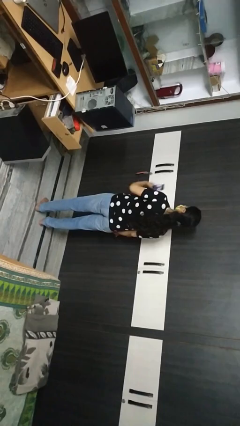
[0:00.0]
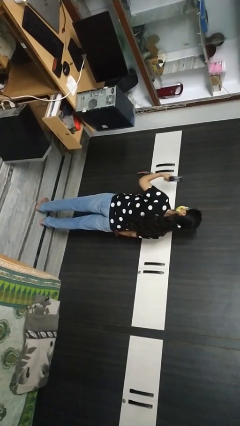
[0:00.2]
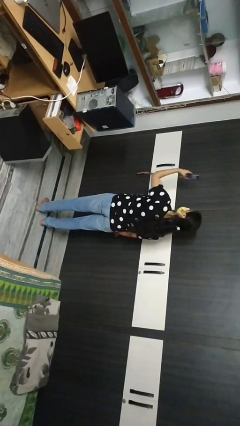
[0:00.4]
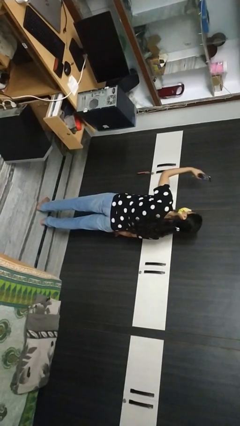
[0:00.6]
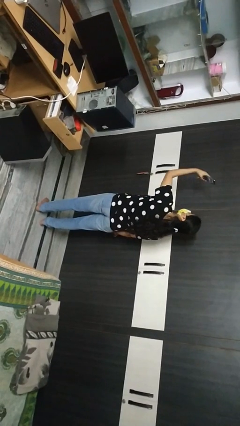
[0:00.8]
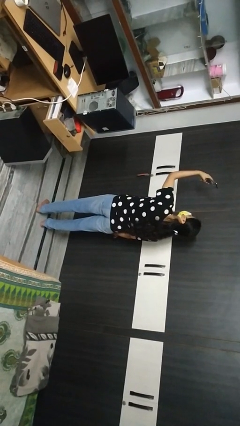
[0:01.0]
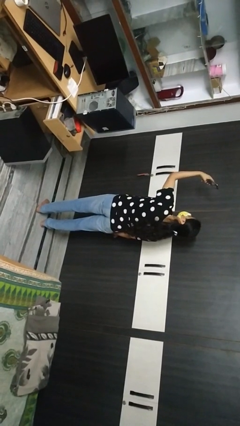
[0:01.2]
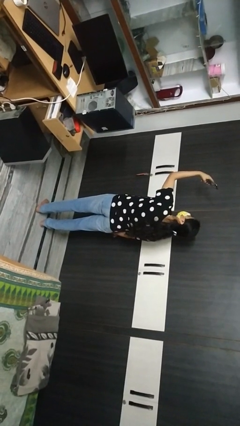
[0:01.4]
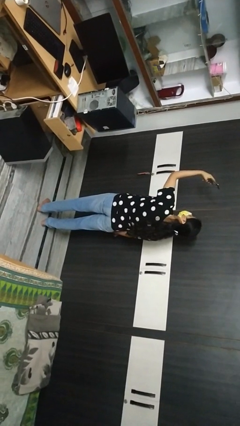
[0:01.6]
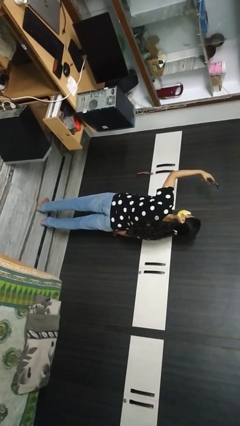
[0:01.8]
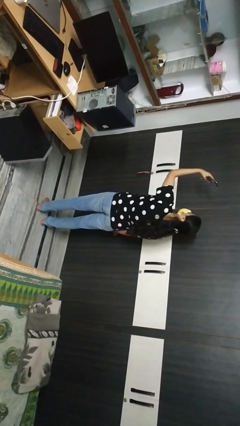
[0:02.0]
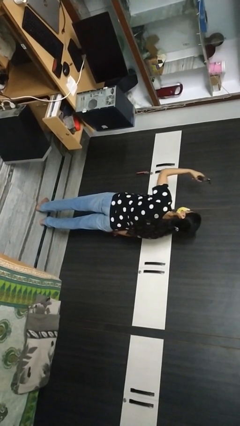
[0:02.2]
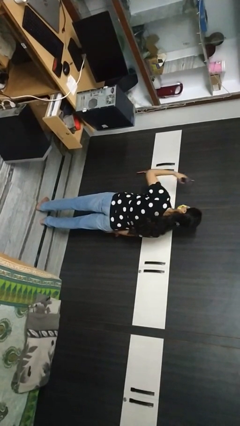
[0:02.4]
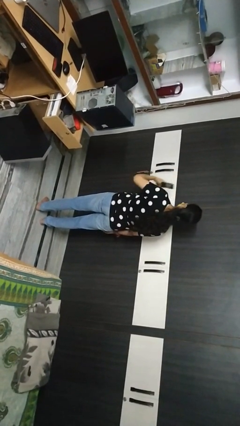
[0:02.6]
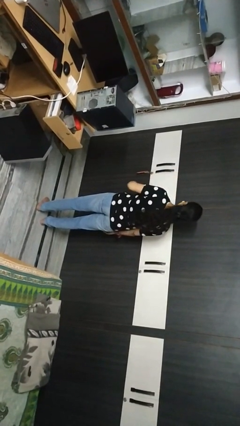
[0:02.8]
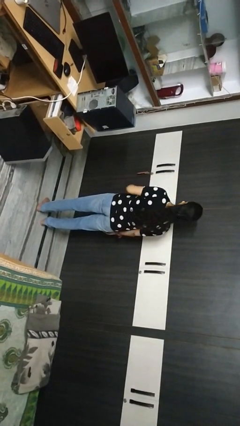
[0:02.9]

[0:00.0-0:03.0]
person takes selfie

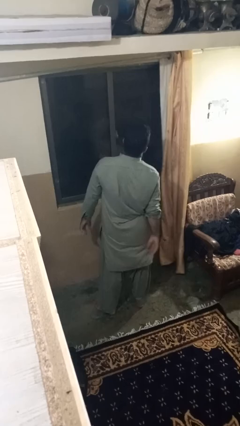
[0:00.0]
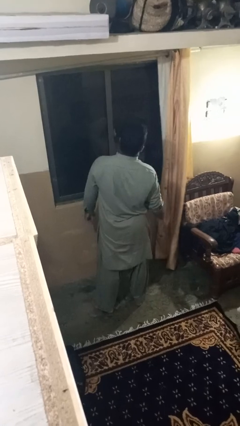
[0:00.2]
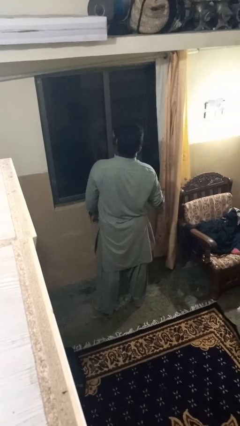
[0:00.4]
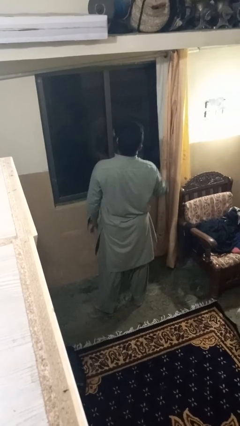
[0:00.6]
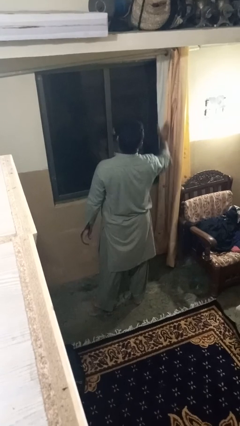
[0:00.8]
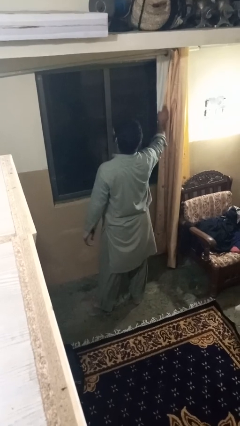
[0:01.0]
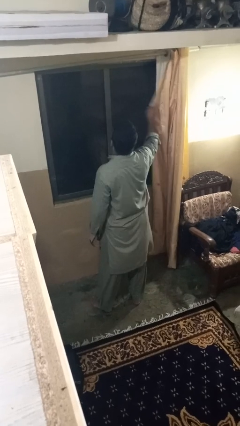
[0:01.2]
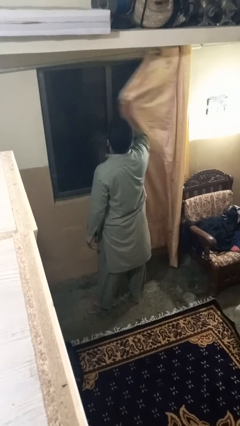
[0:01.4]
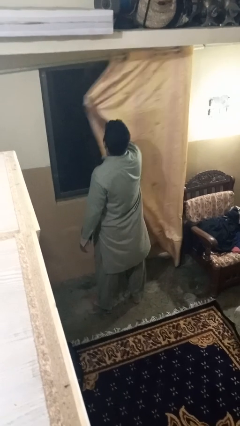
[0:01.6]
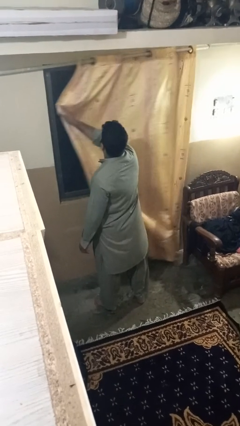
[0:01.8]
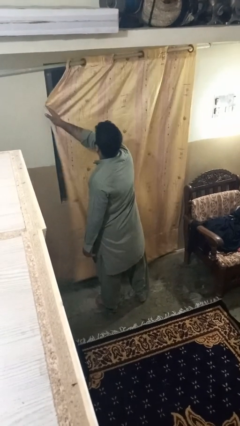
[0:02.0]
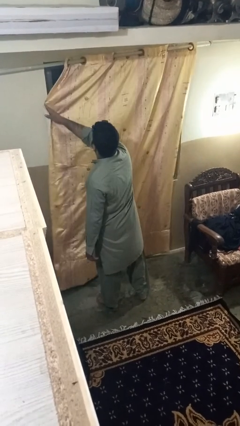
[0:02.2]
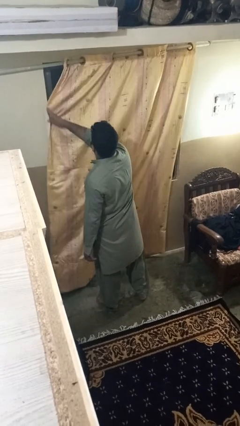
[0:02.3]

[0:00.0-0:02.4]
person closes curtains

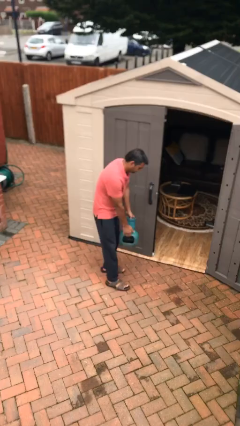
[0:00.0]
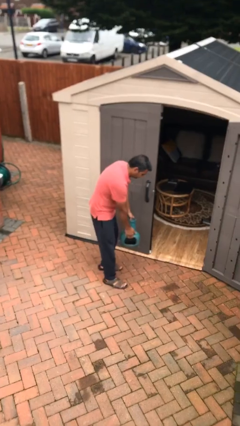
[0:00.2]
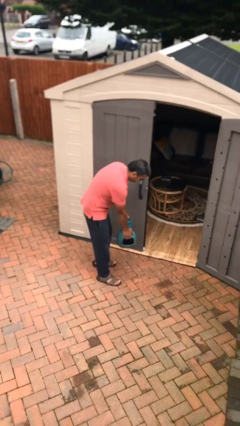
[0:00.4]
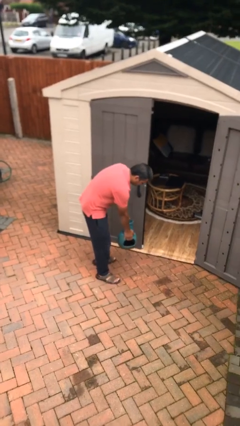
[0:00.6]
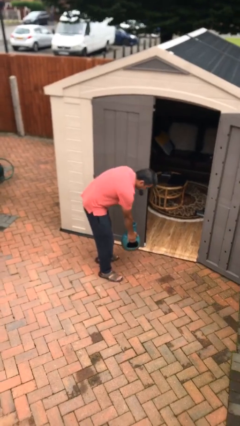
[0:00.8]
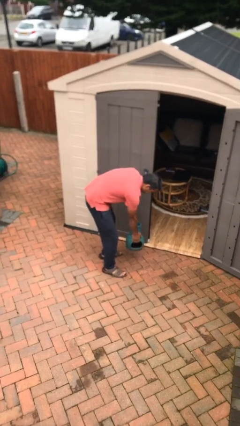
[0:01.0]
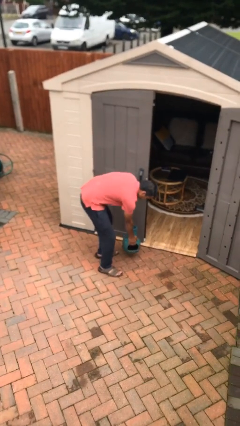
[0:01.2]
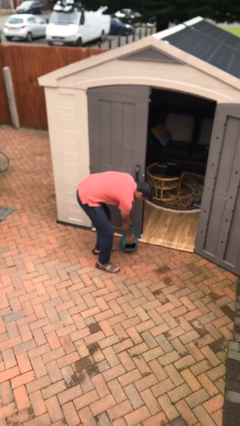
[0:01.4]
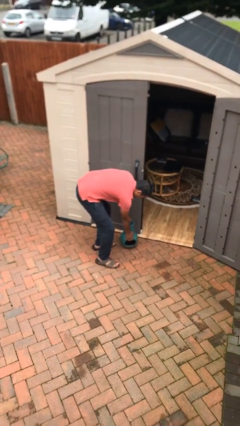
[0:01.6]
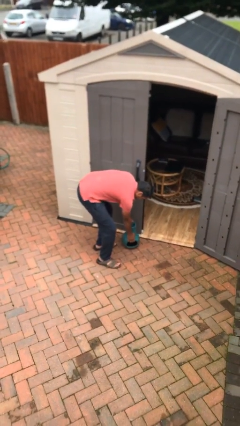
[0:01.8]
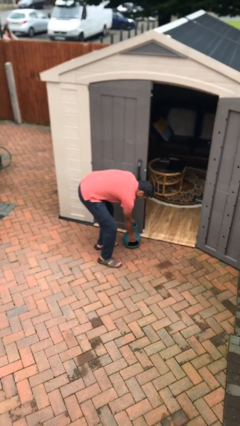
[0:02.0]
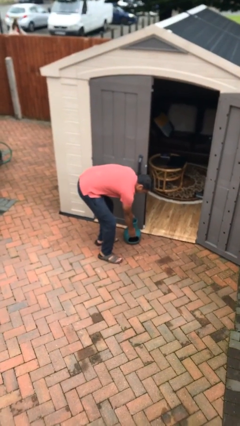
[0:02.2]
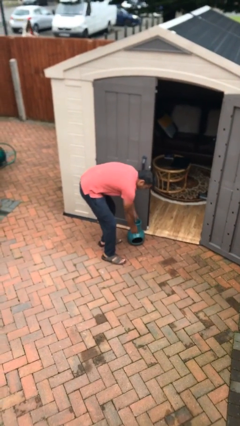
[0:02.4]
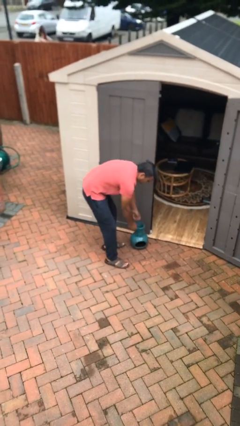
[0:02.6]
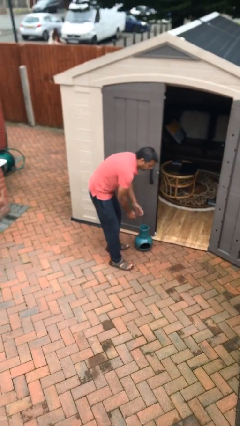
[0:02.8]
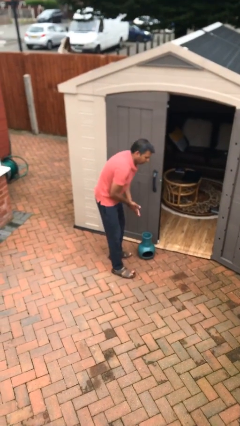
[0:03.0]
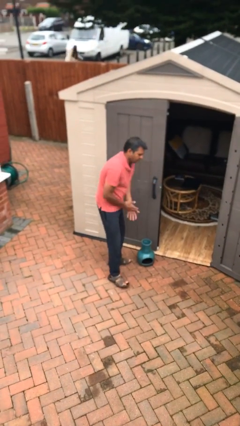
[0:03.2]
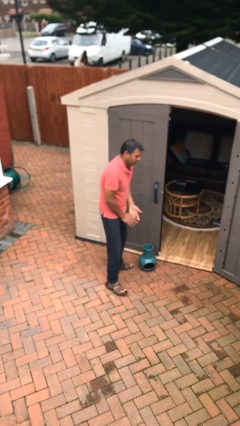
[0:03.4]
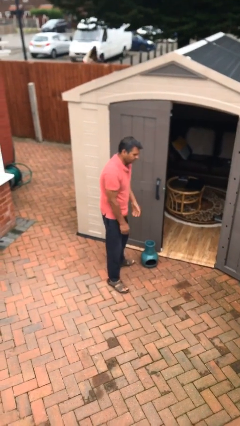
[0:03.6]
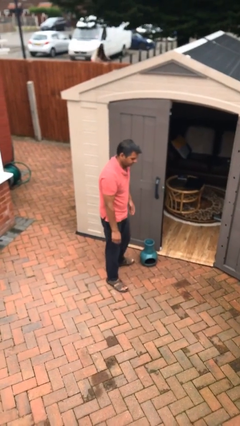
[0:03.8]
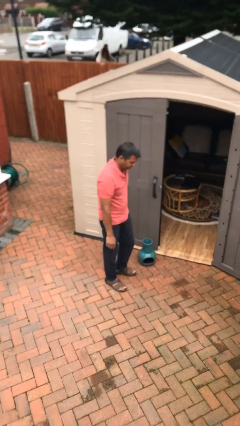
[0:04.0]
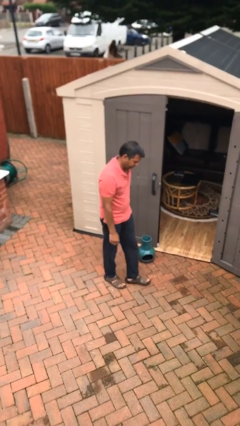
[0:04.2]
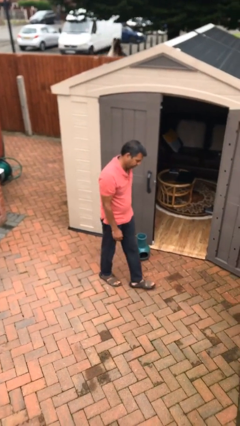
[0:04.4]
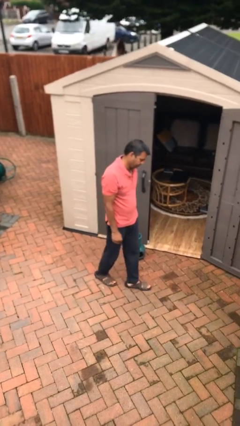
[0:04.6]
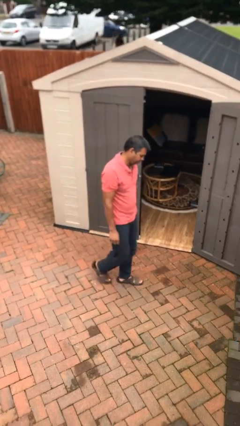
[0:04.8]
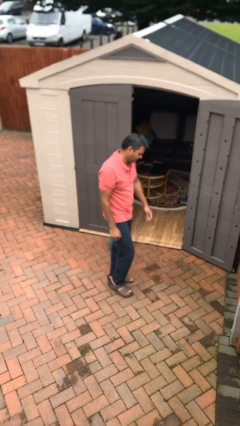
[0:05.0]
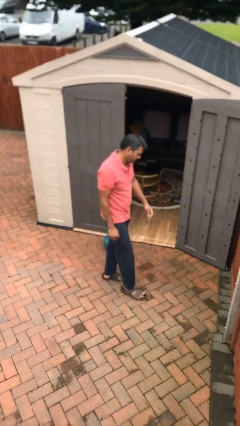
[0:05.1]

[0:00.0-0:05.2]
person puts down object on floor

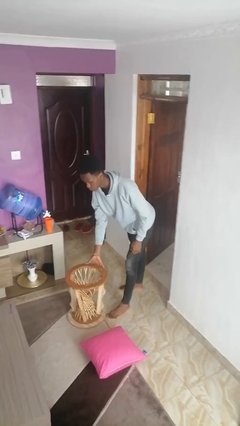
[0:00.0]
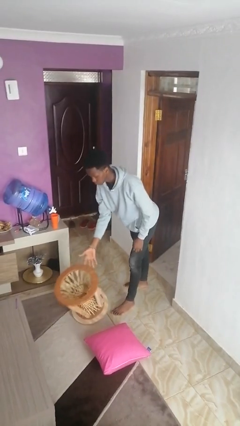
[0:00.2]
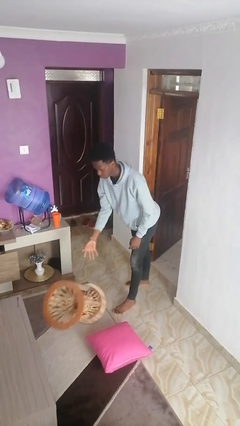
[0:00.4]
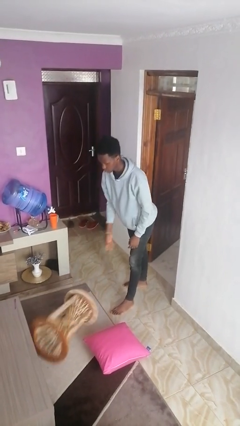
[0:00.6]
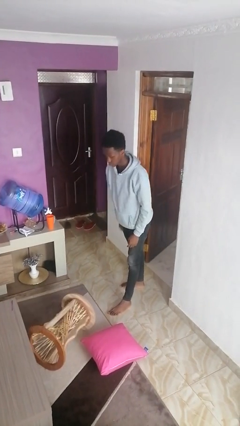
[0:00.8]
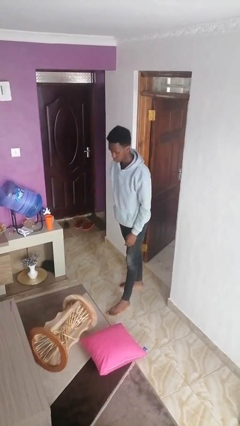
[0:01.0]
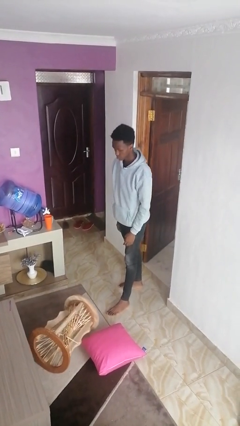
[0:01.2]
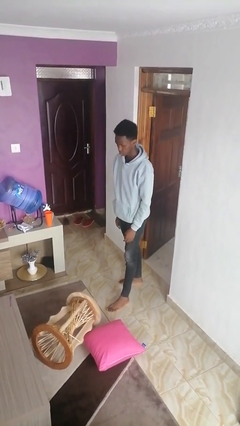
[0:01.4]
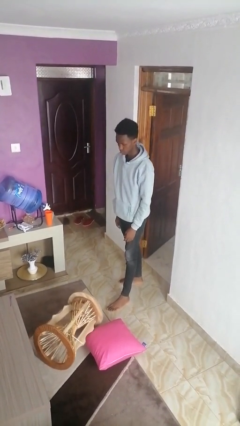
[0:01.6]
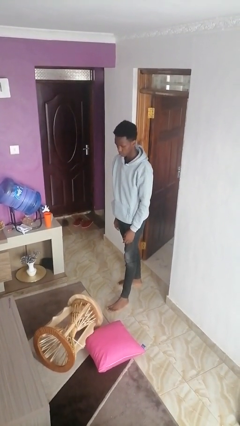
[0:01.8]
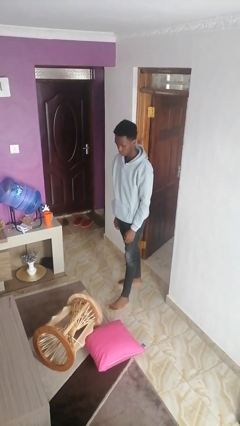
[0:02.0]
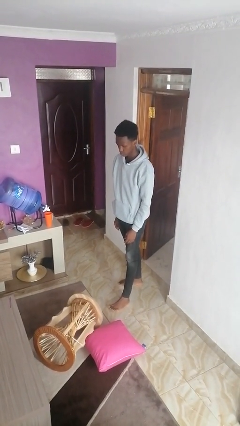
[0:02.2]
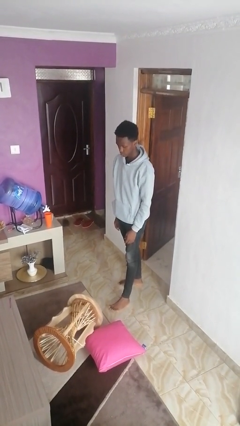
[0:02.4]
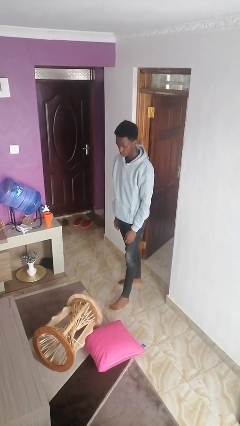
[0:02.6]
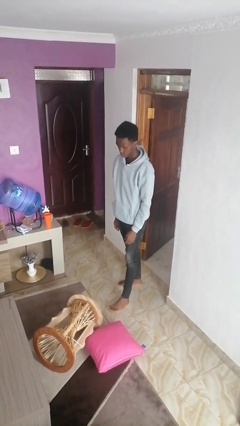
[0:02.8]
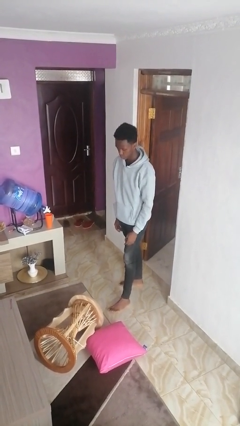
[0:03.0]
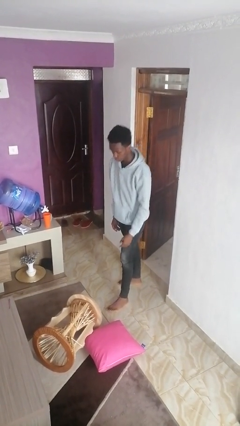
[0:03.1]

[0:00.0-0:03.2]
person knocks over furniture

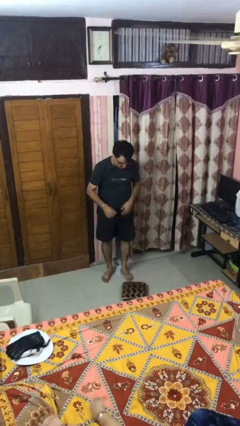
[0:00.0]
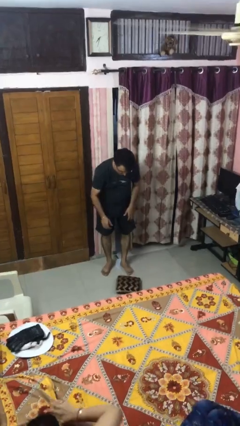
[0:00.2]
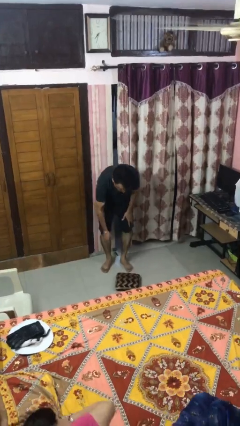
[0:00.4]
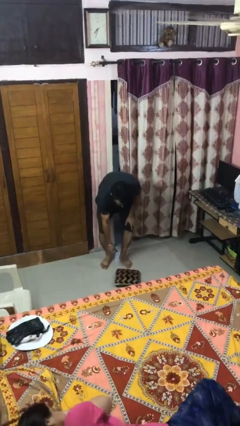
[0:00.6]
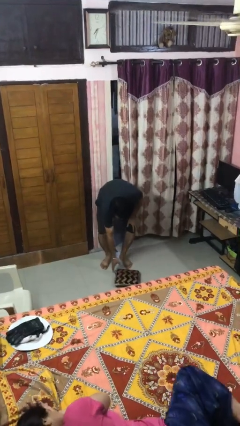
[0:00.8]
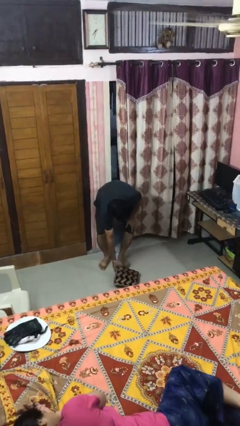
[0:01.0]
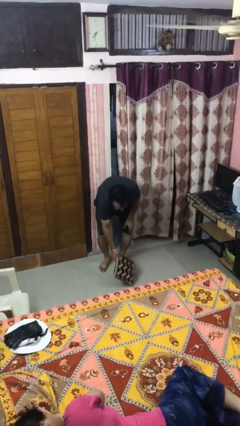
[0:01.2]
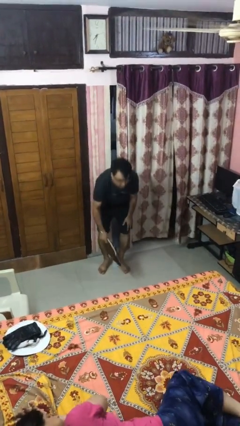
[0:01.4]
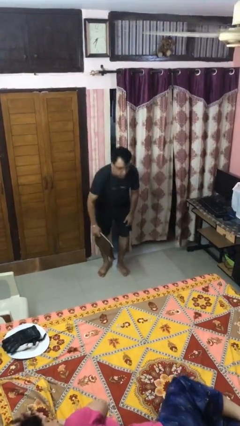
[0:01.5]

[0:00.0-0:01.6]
person picks up object from floor

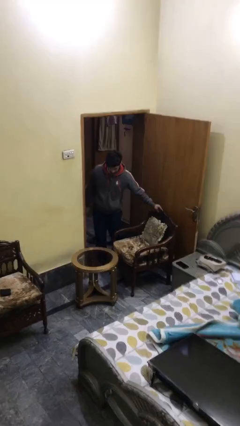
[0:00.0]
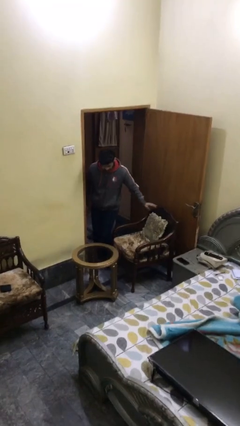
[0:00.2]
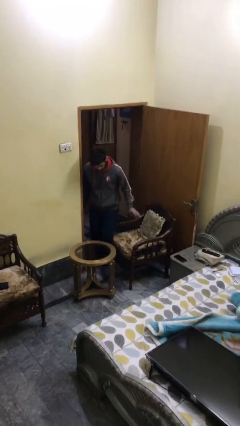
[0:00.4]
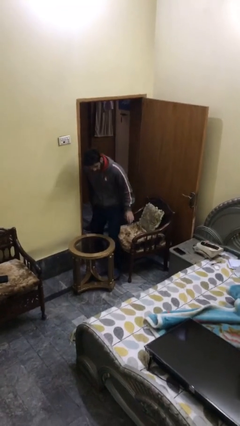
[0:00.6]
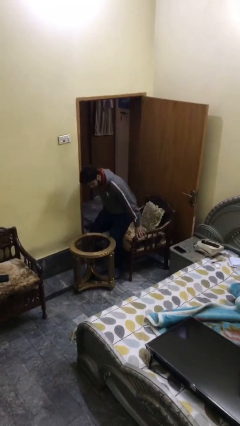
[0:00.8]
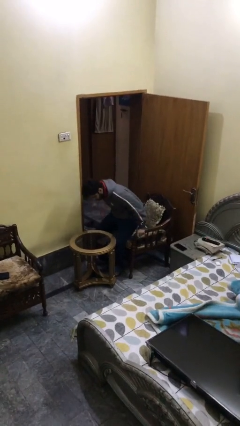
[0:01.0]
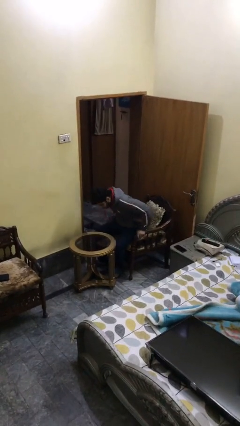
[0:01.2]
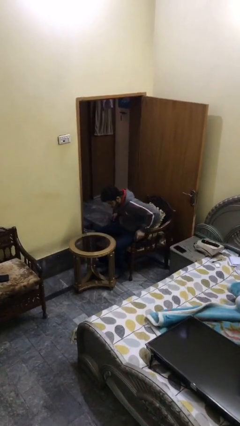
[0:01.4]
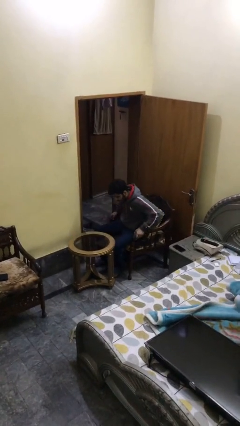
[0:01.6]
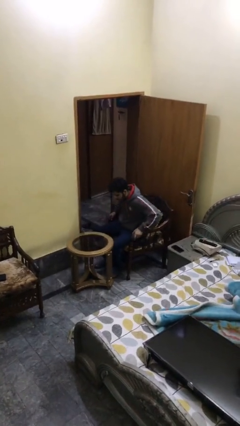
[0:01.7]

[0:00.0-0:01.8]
person sits down

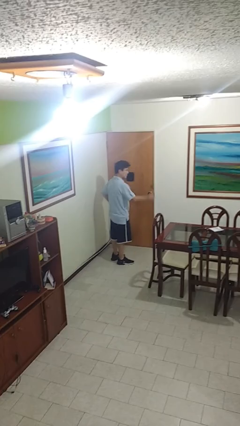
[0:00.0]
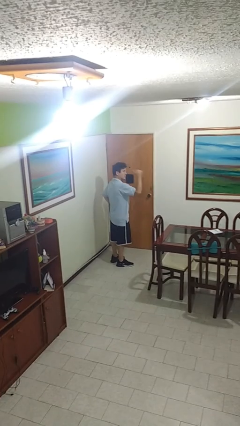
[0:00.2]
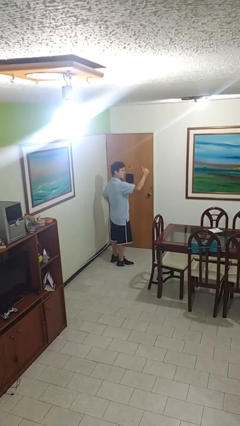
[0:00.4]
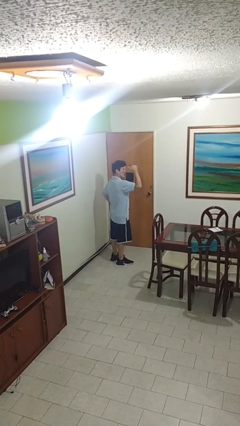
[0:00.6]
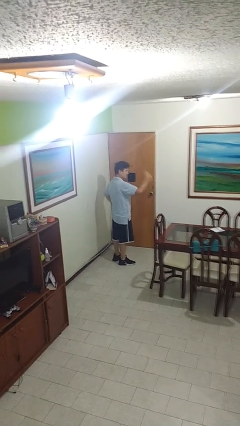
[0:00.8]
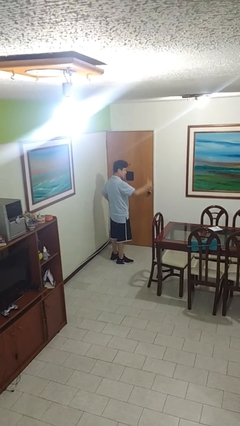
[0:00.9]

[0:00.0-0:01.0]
person gestures behind me
